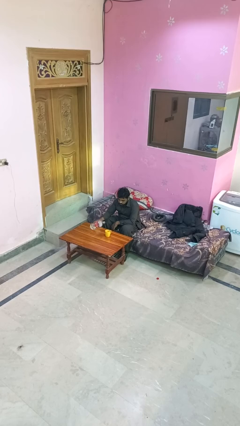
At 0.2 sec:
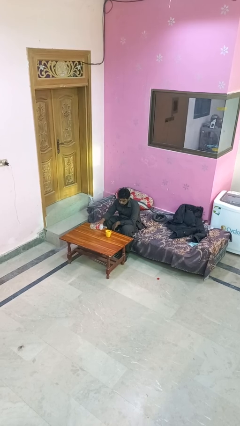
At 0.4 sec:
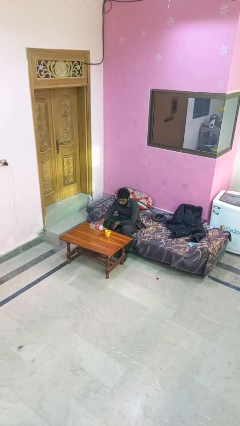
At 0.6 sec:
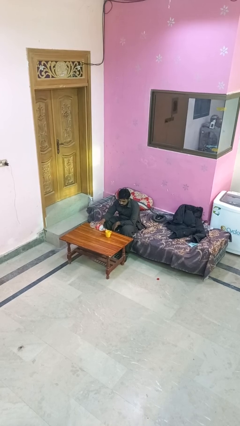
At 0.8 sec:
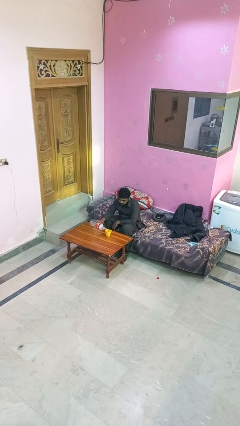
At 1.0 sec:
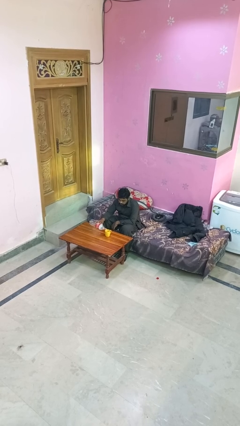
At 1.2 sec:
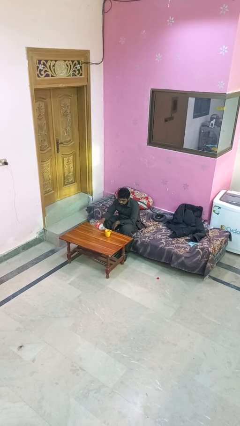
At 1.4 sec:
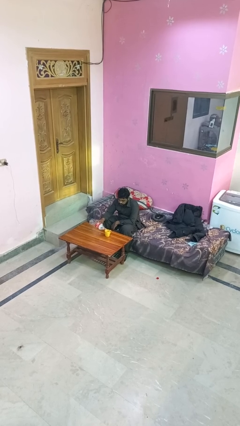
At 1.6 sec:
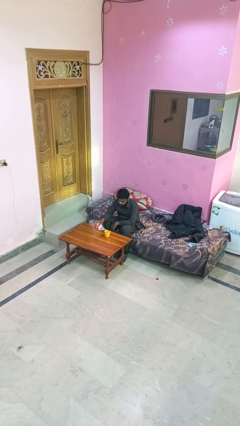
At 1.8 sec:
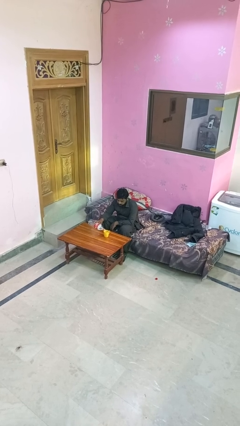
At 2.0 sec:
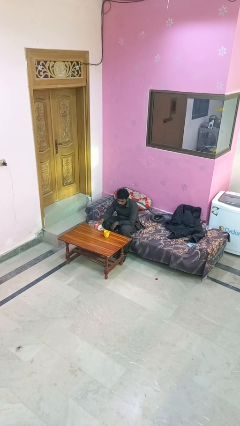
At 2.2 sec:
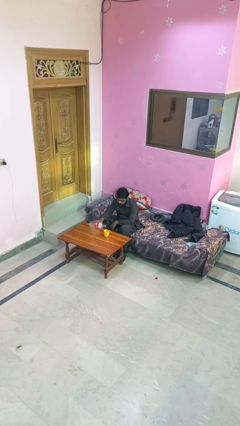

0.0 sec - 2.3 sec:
person pours liquid into cup

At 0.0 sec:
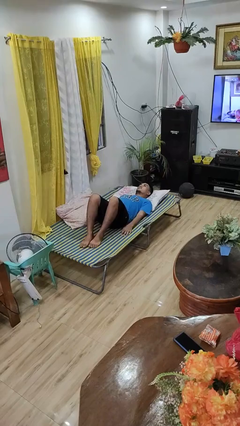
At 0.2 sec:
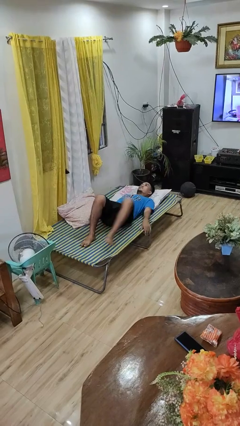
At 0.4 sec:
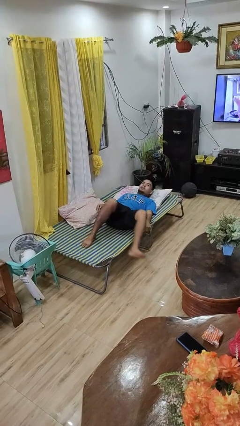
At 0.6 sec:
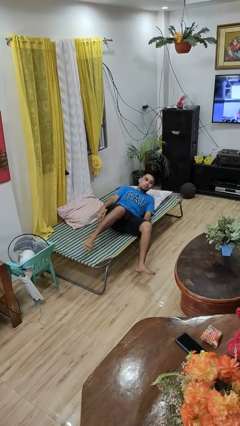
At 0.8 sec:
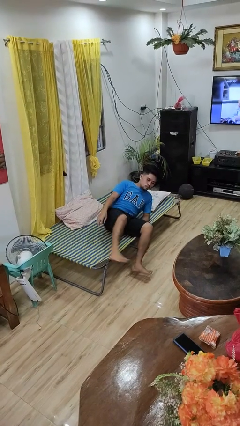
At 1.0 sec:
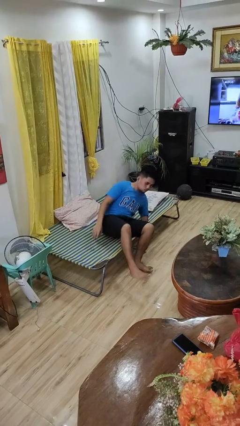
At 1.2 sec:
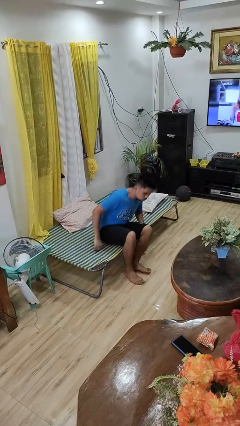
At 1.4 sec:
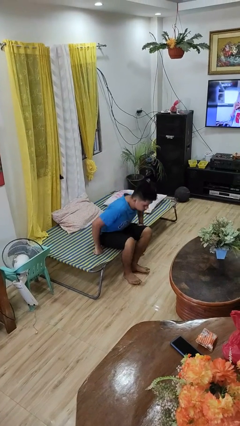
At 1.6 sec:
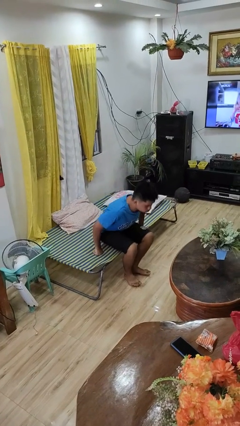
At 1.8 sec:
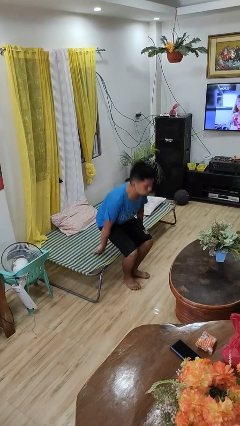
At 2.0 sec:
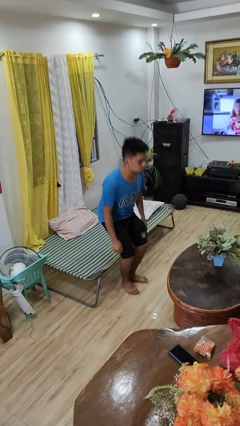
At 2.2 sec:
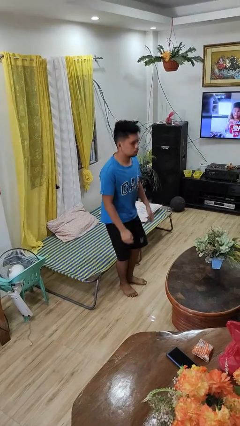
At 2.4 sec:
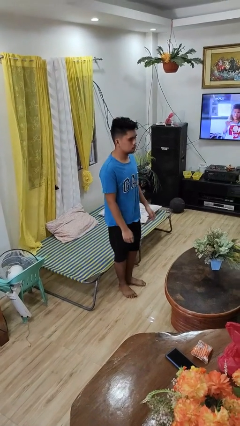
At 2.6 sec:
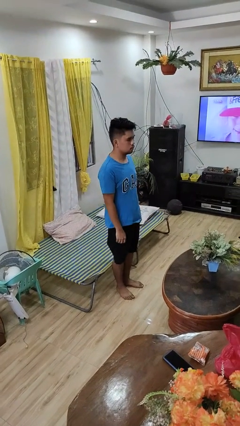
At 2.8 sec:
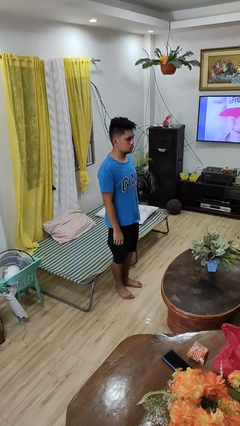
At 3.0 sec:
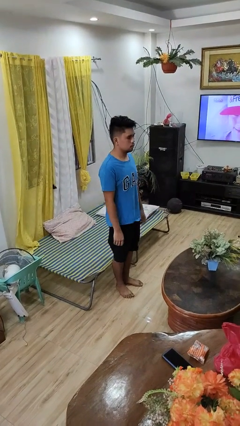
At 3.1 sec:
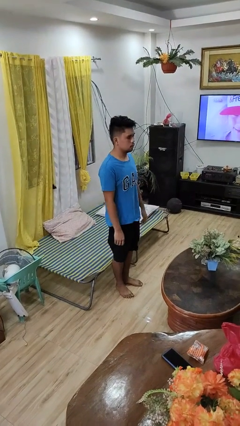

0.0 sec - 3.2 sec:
person stands up

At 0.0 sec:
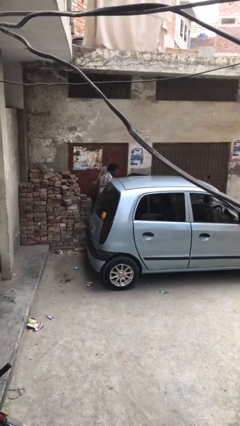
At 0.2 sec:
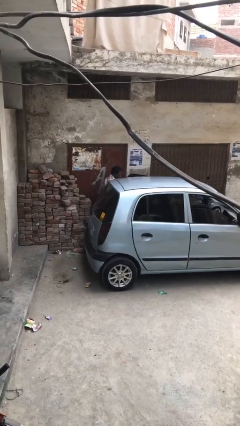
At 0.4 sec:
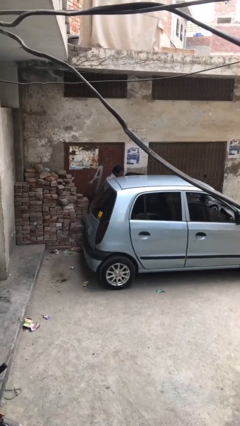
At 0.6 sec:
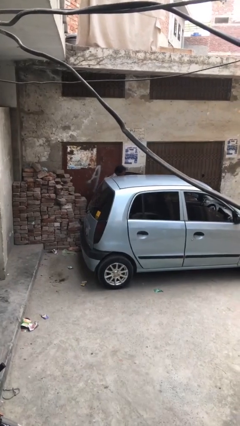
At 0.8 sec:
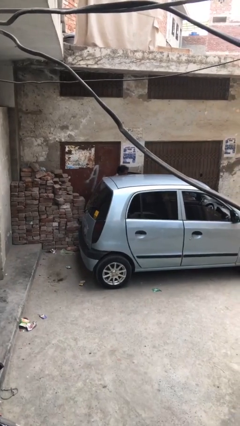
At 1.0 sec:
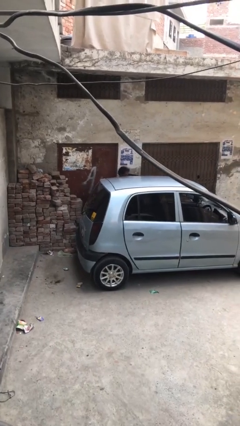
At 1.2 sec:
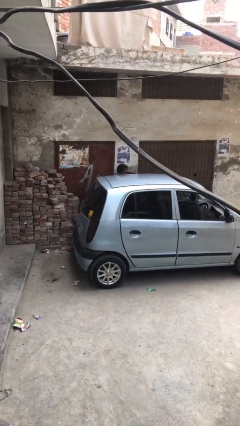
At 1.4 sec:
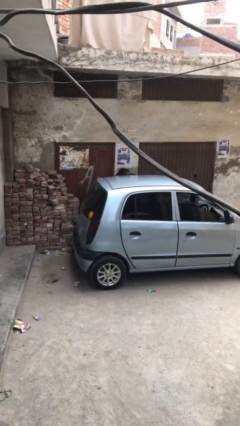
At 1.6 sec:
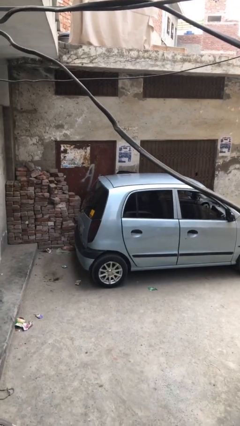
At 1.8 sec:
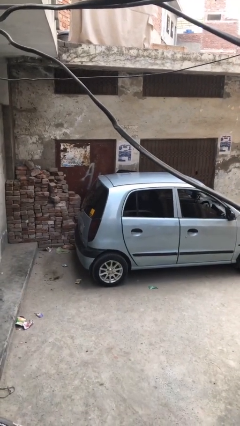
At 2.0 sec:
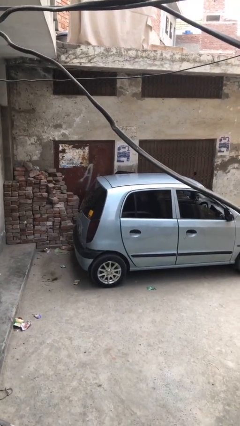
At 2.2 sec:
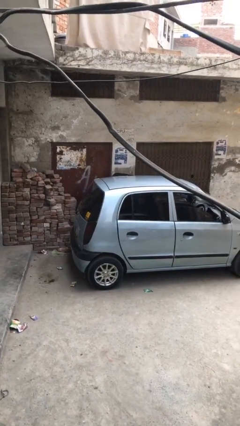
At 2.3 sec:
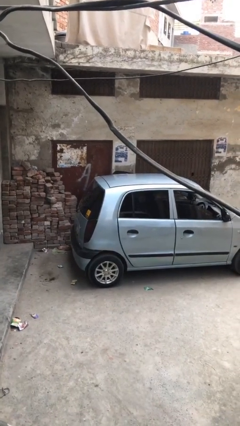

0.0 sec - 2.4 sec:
person enters car

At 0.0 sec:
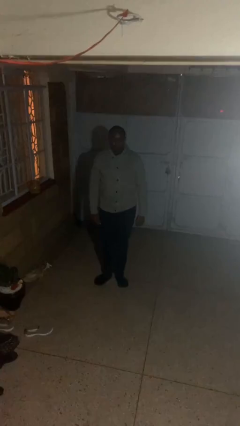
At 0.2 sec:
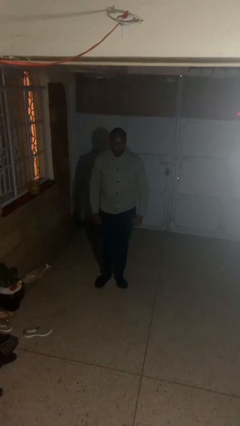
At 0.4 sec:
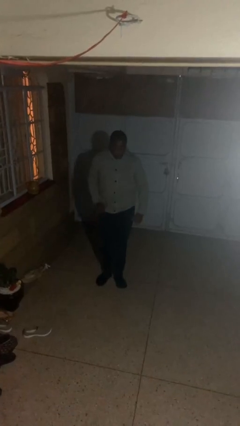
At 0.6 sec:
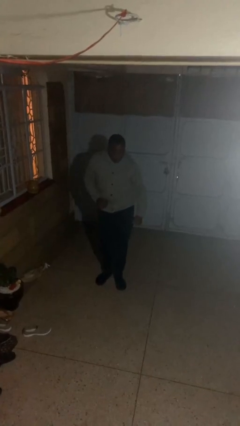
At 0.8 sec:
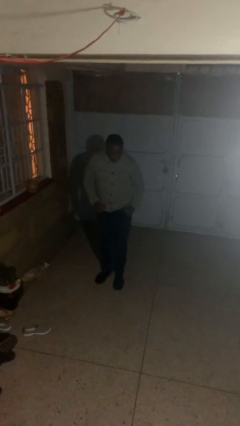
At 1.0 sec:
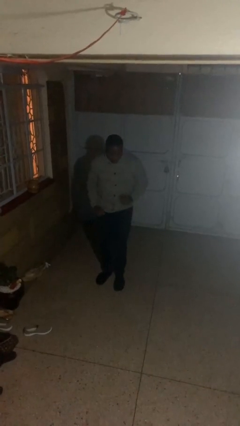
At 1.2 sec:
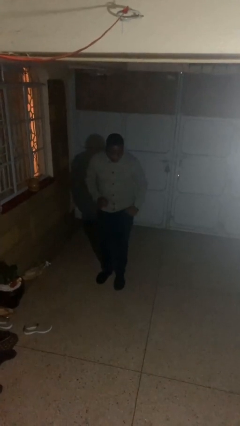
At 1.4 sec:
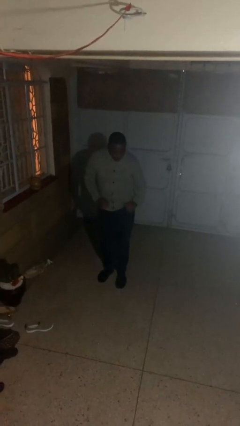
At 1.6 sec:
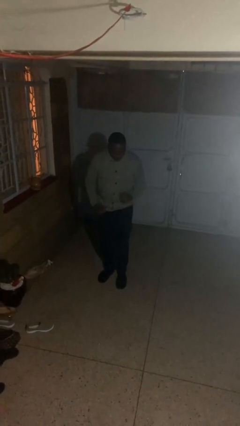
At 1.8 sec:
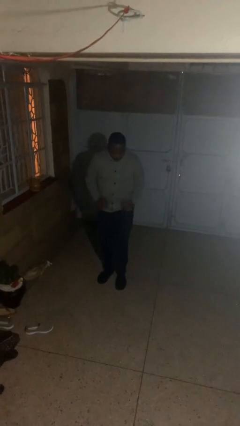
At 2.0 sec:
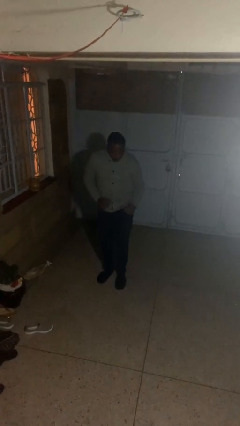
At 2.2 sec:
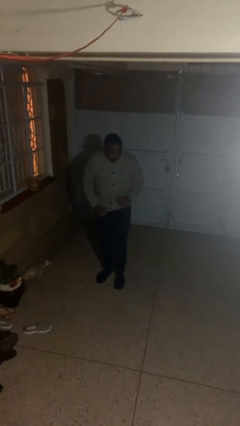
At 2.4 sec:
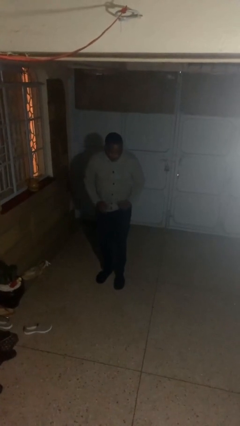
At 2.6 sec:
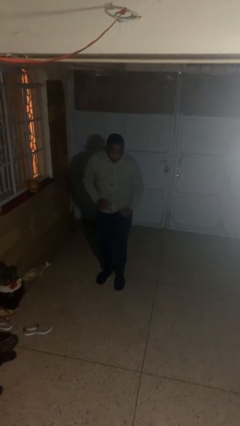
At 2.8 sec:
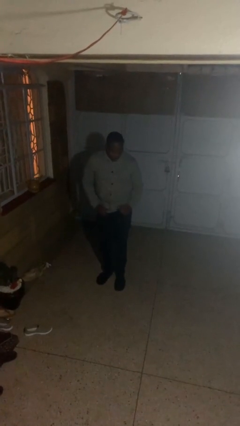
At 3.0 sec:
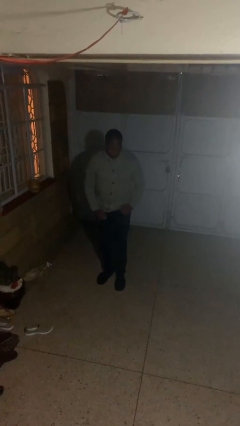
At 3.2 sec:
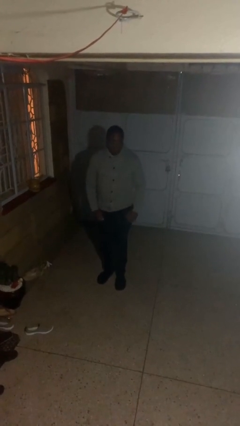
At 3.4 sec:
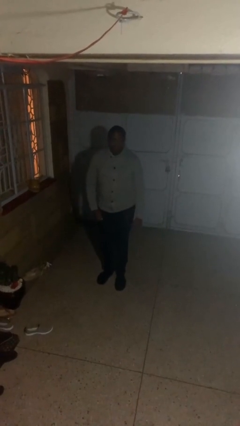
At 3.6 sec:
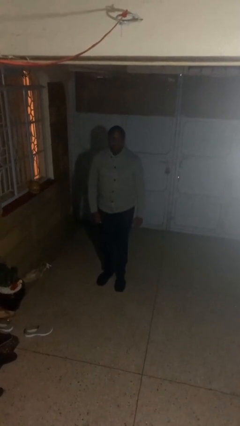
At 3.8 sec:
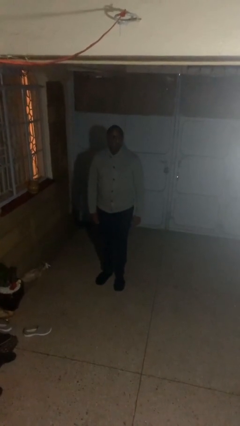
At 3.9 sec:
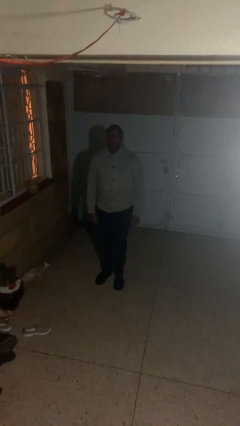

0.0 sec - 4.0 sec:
person dances in place

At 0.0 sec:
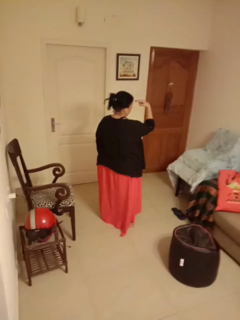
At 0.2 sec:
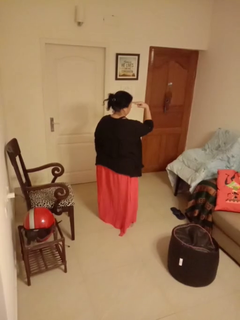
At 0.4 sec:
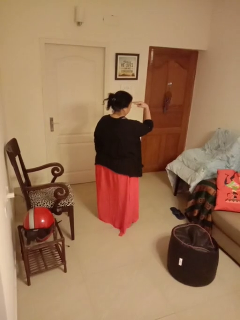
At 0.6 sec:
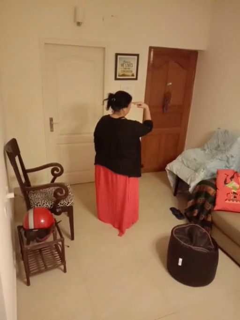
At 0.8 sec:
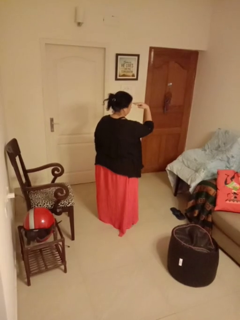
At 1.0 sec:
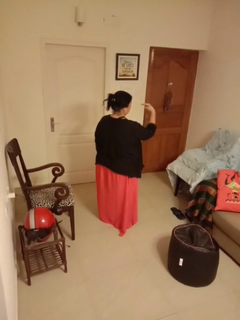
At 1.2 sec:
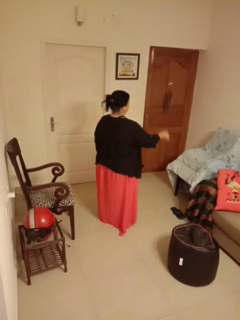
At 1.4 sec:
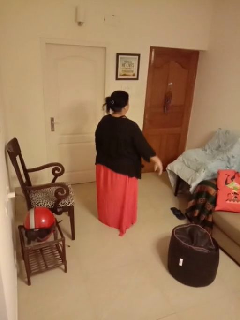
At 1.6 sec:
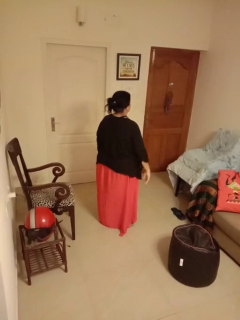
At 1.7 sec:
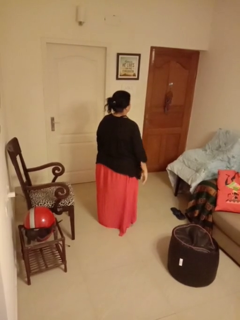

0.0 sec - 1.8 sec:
person gestures watch closely

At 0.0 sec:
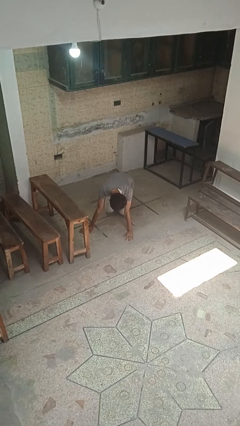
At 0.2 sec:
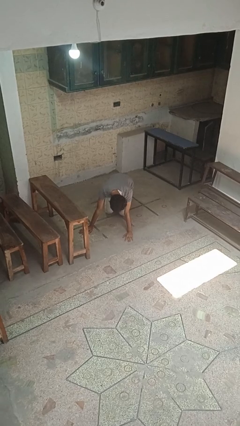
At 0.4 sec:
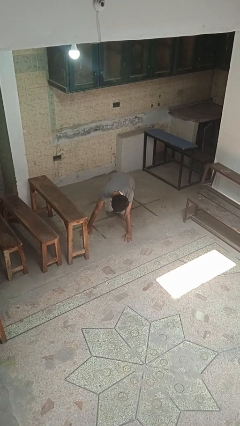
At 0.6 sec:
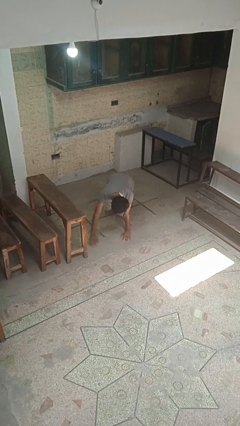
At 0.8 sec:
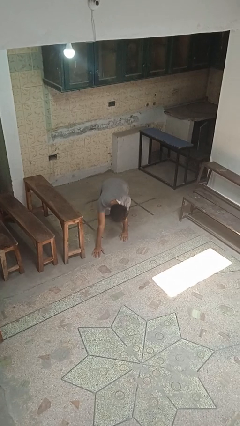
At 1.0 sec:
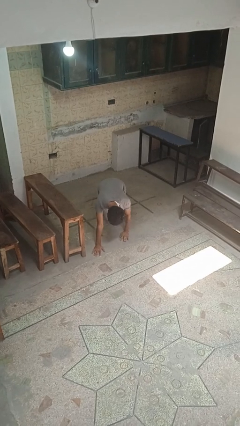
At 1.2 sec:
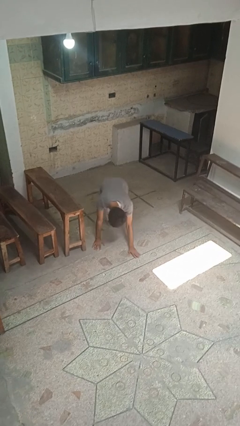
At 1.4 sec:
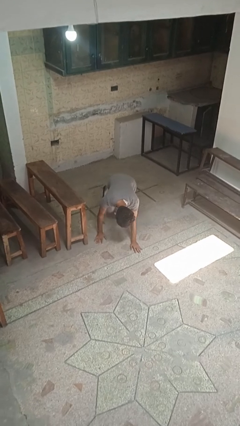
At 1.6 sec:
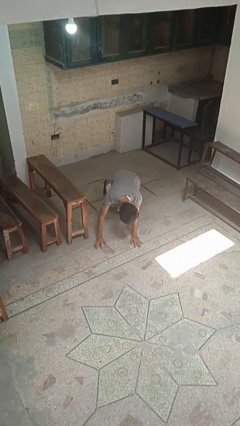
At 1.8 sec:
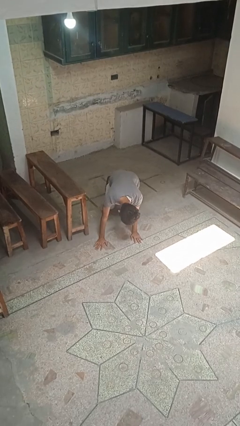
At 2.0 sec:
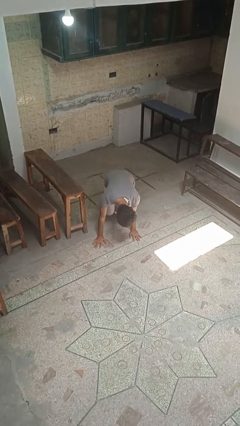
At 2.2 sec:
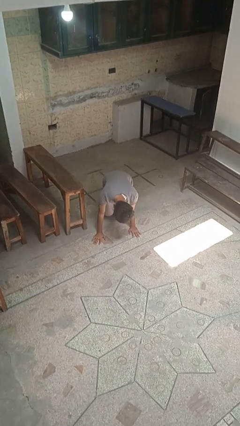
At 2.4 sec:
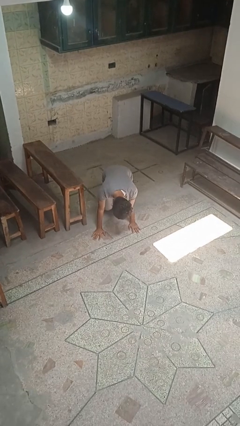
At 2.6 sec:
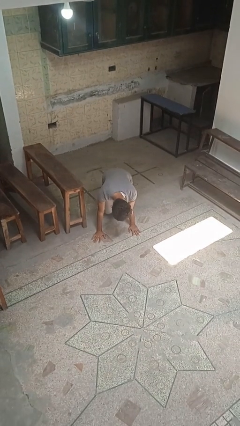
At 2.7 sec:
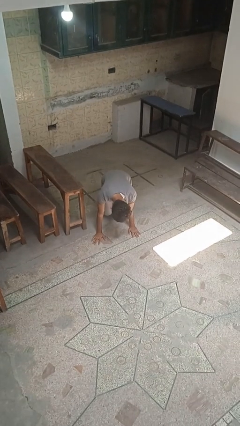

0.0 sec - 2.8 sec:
person crawls

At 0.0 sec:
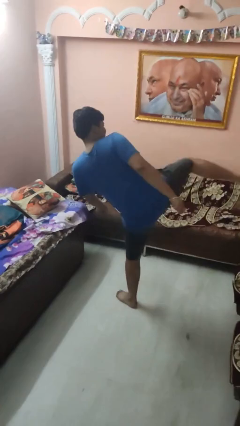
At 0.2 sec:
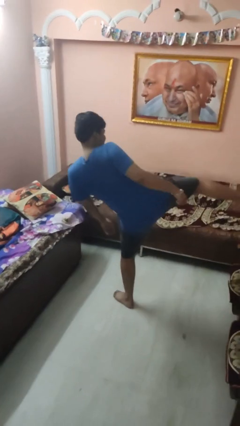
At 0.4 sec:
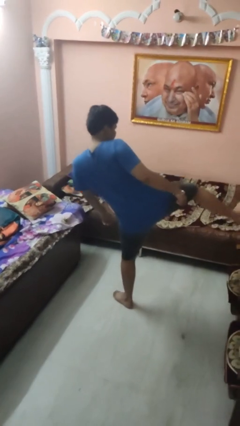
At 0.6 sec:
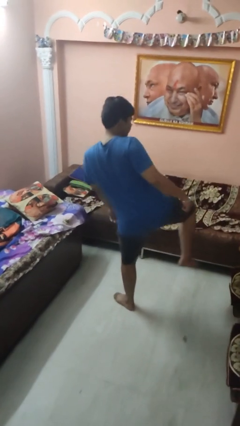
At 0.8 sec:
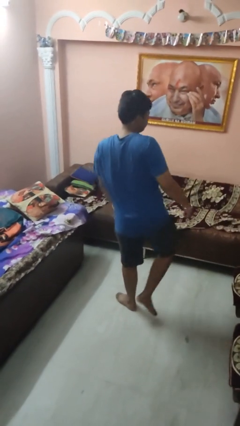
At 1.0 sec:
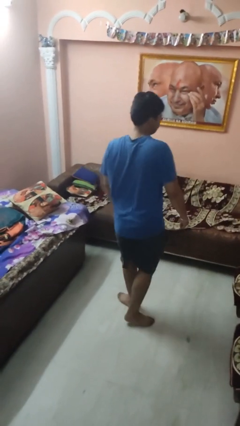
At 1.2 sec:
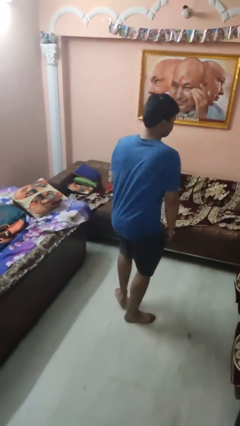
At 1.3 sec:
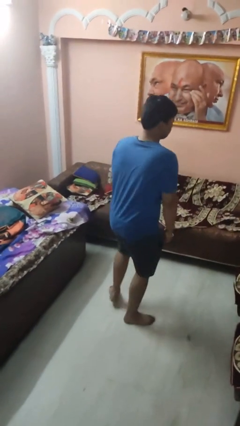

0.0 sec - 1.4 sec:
person karate kicks
